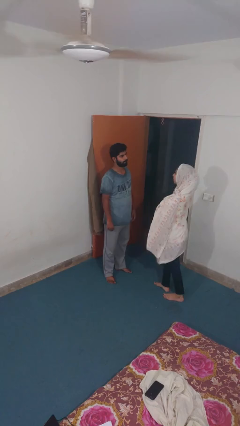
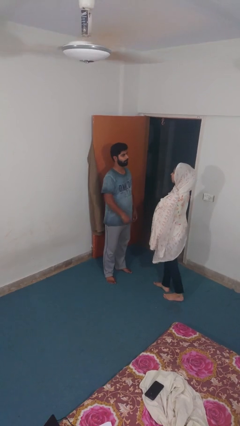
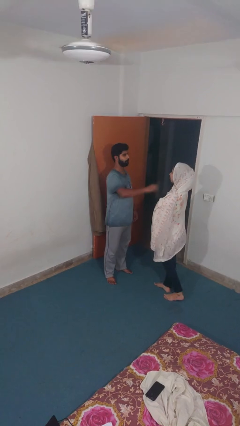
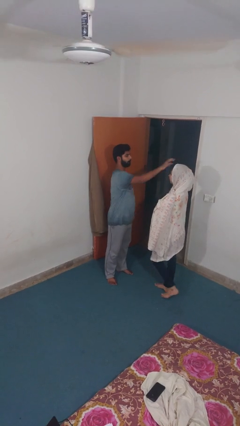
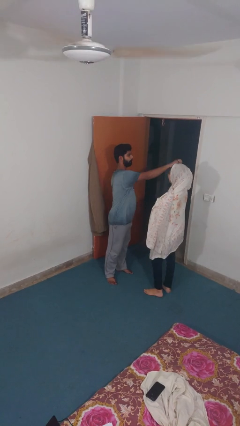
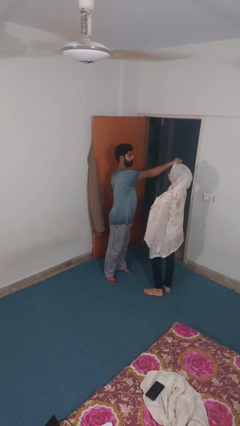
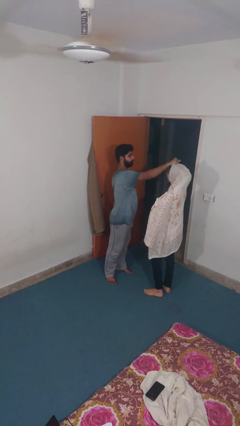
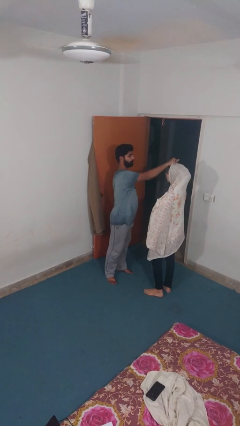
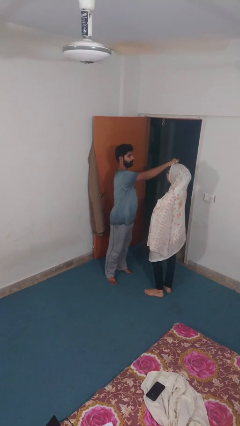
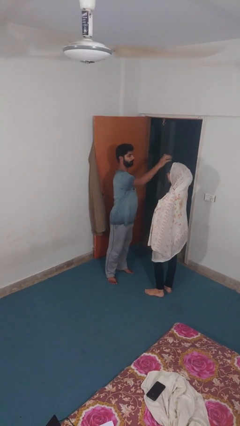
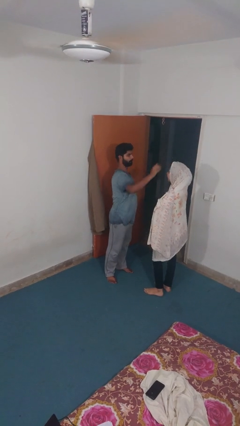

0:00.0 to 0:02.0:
person grabs person by hair

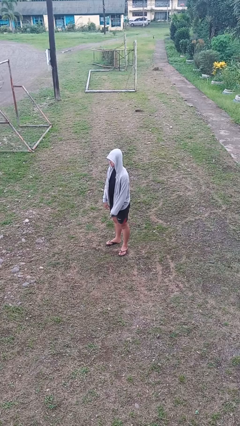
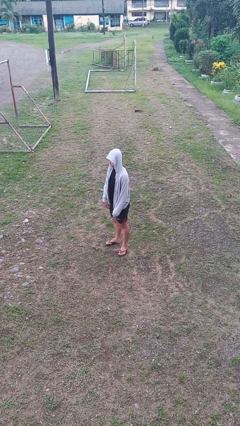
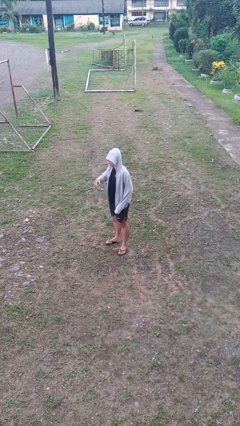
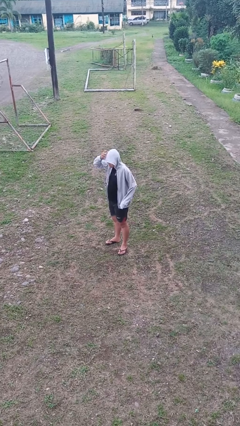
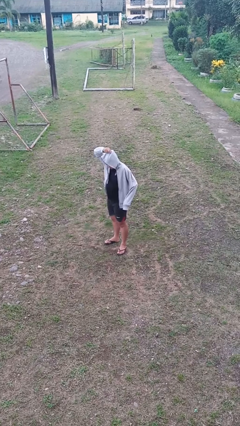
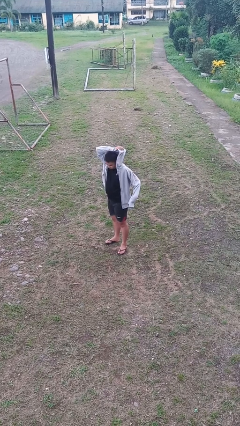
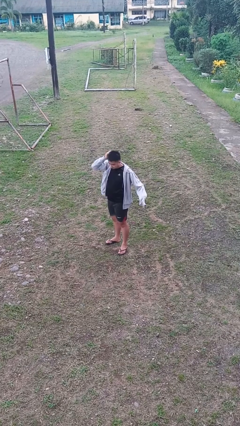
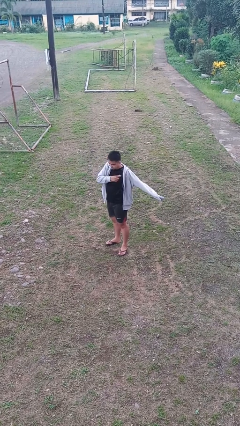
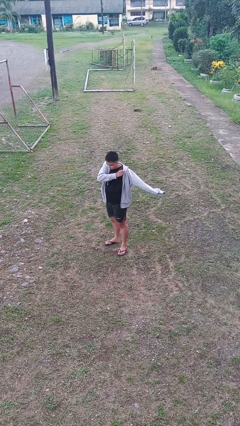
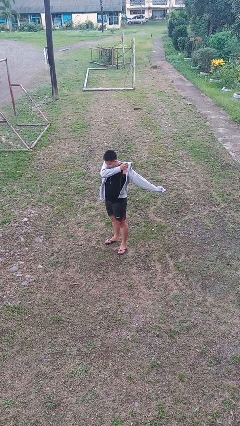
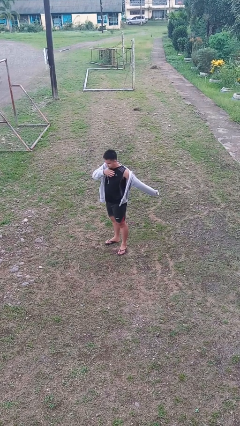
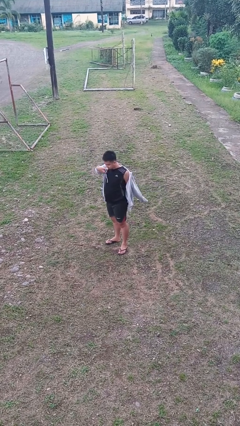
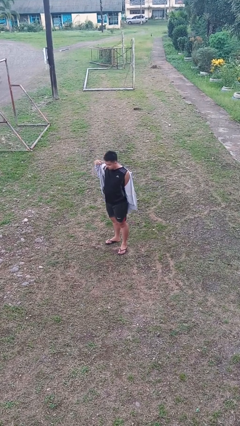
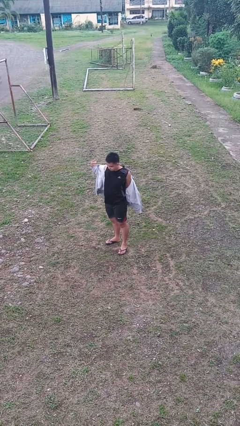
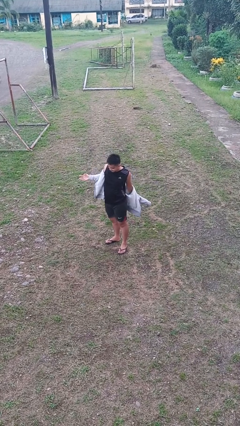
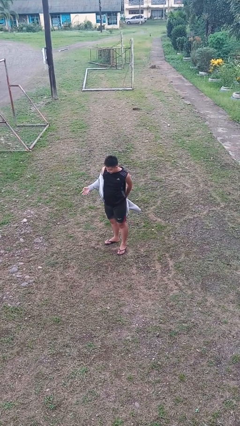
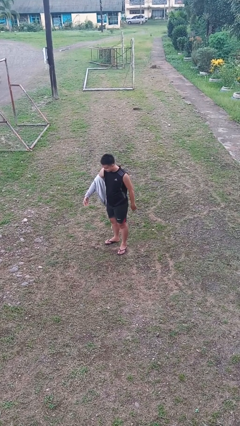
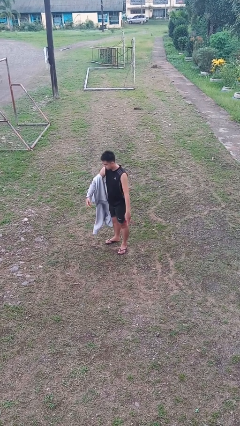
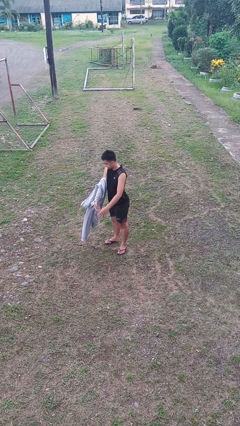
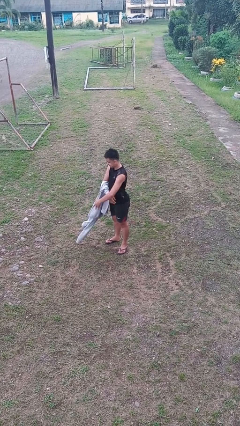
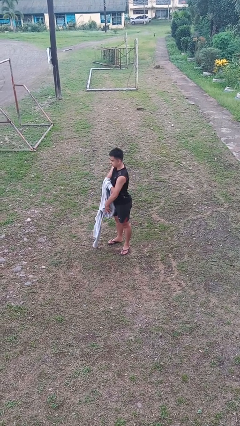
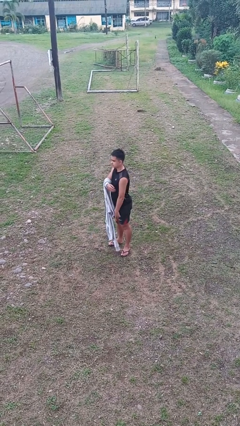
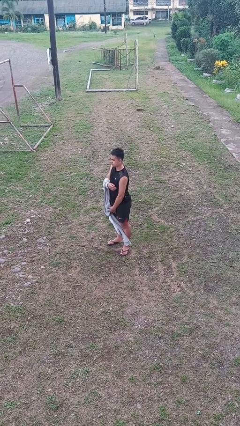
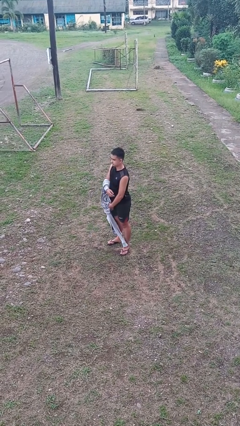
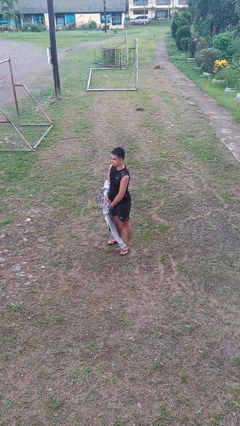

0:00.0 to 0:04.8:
person takes off hoodie

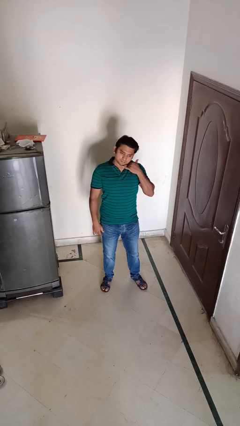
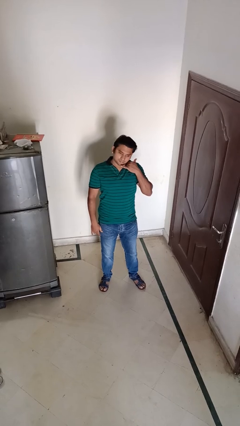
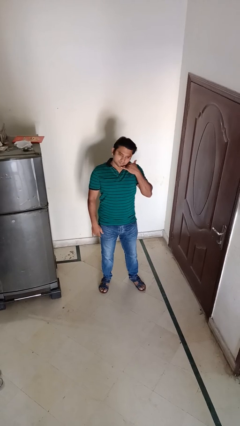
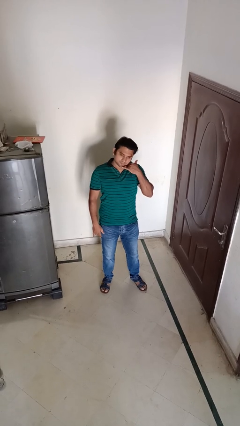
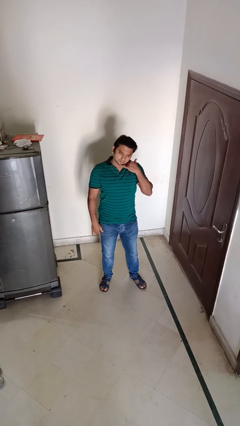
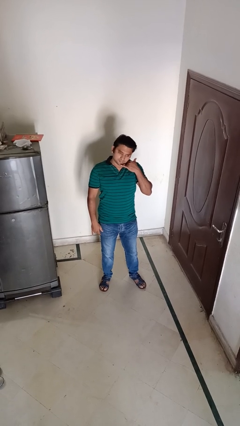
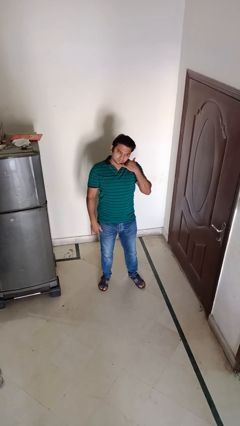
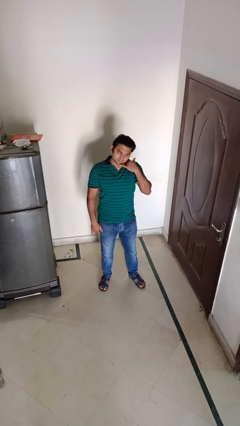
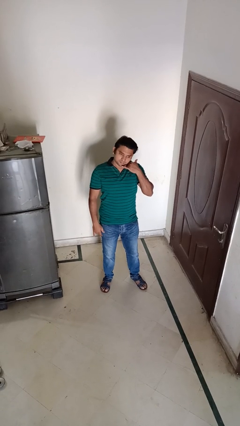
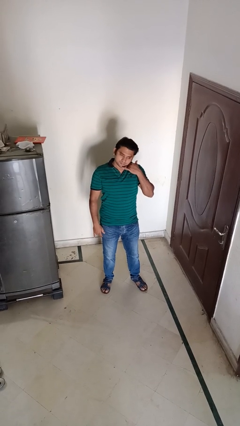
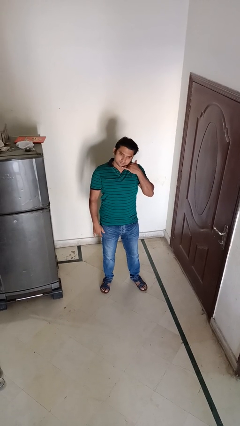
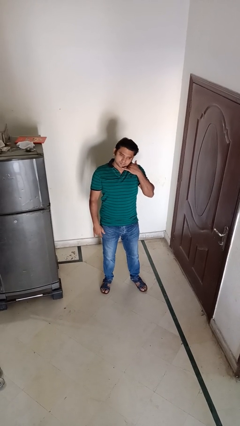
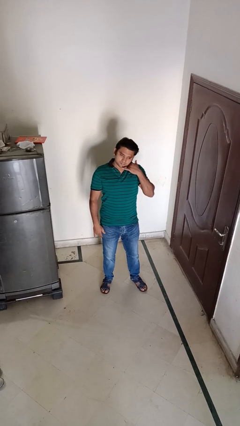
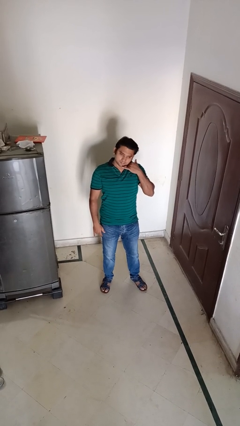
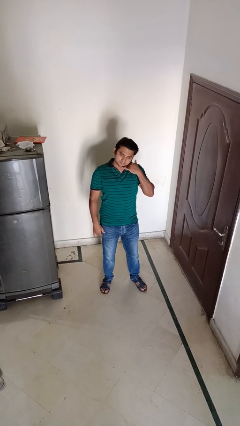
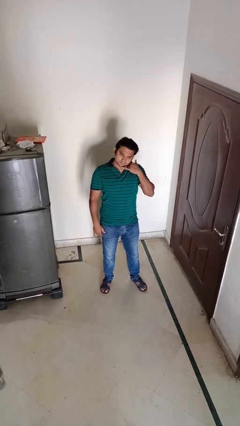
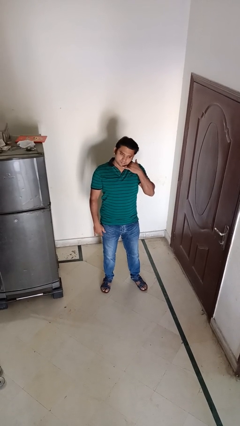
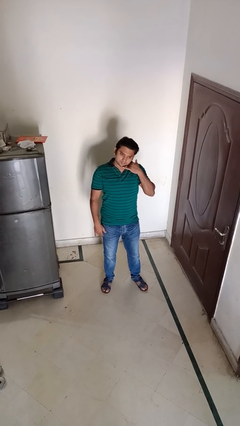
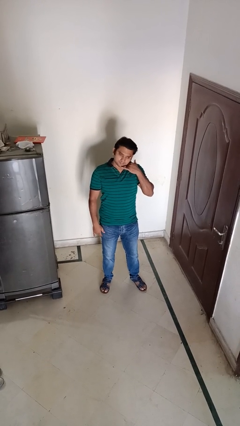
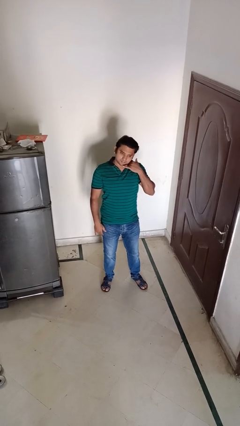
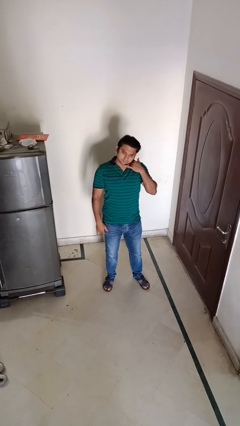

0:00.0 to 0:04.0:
person gestures call me

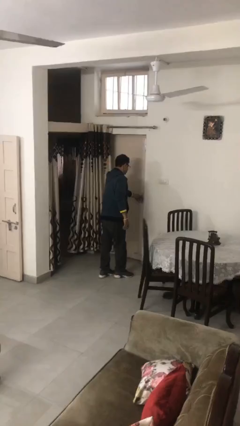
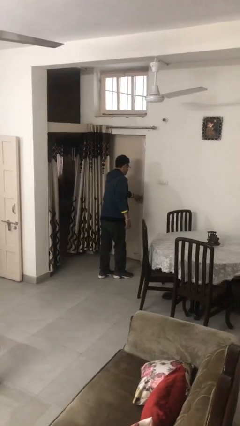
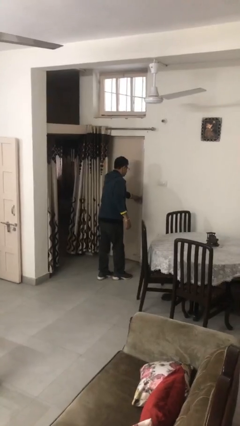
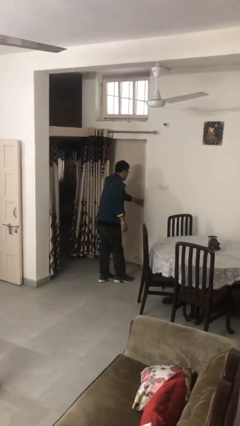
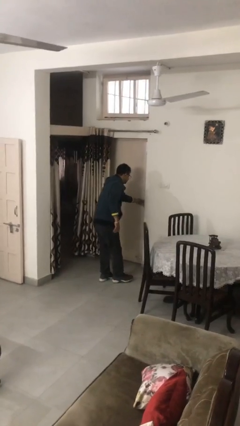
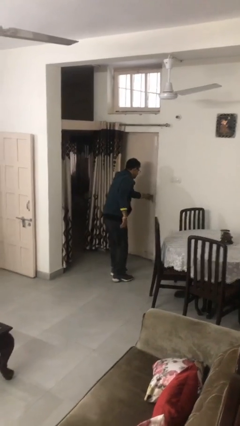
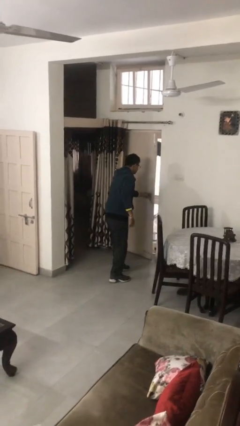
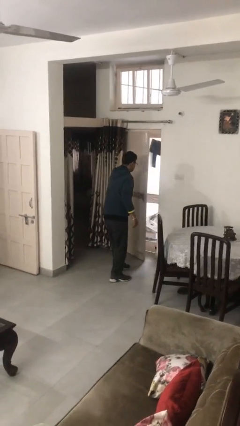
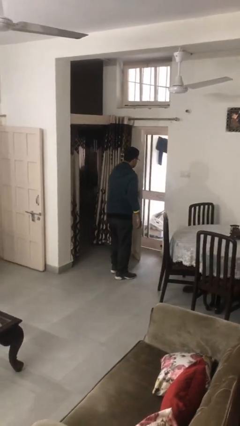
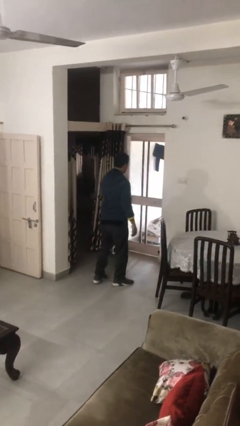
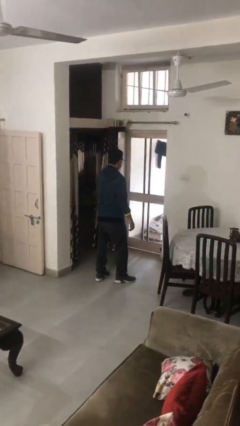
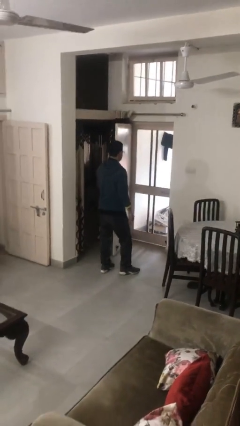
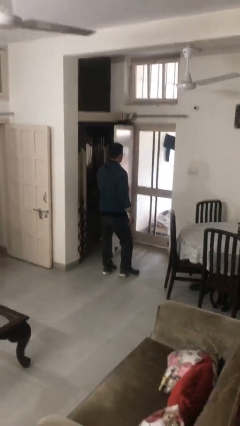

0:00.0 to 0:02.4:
person opens facility door

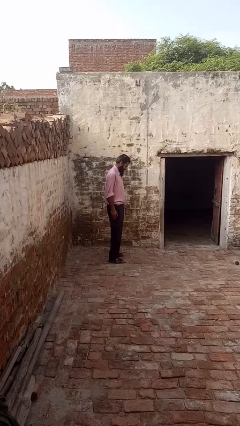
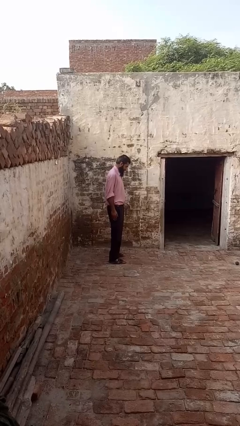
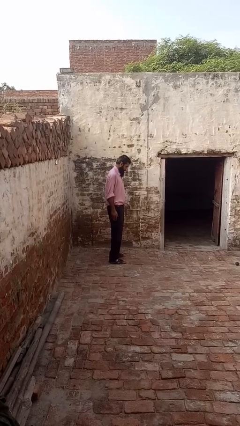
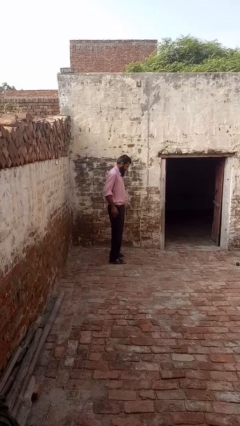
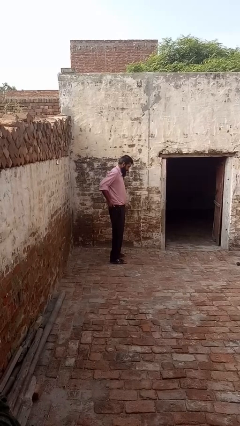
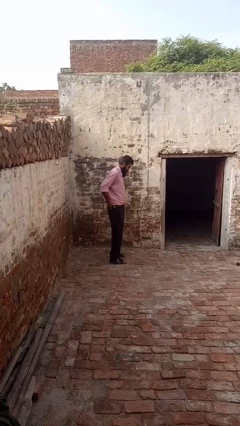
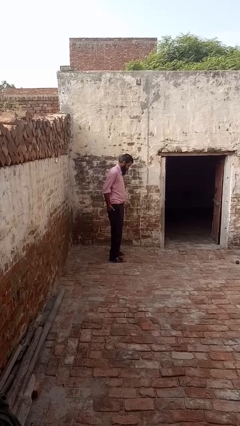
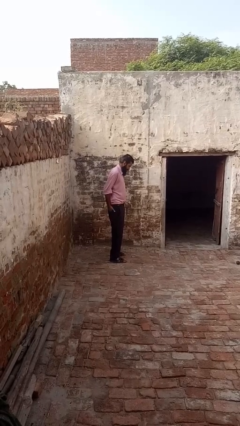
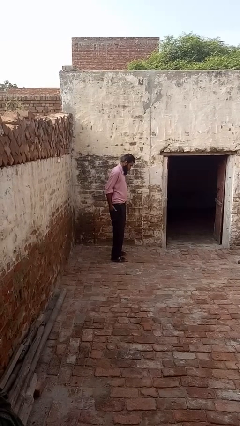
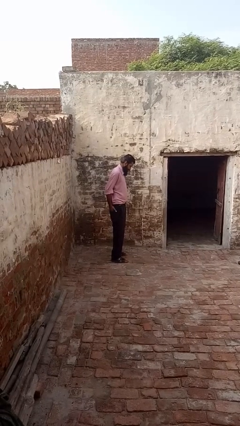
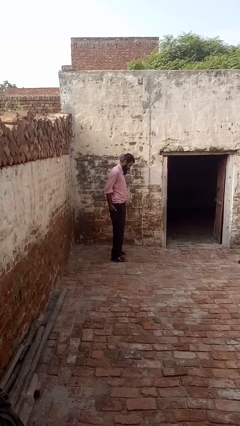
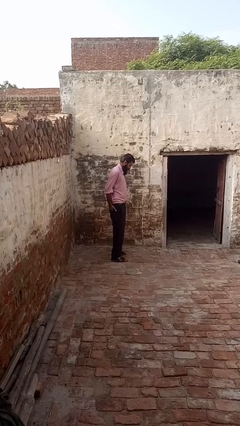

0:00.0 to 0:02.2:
person puts hands in back pockets

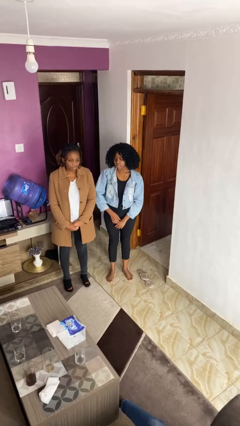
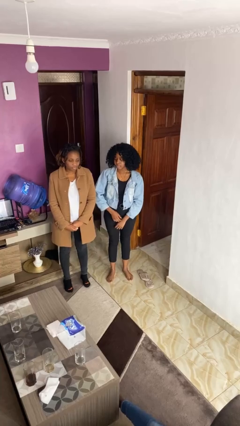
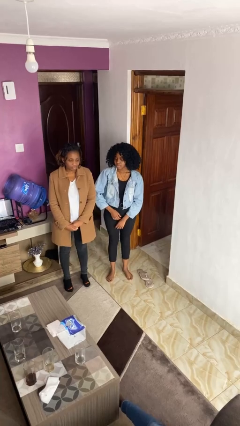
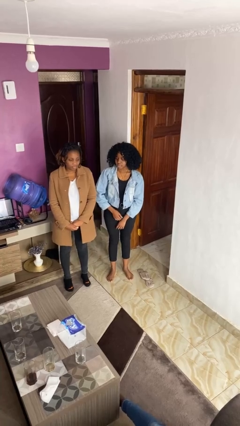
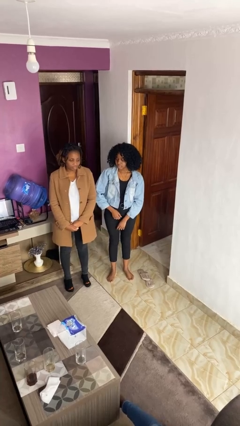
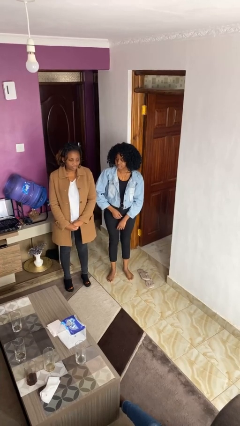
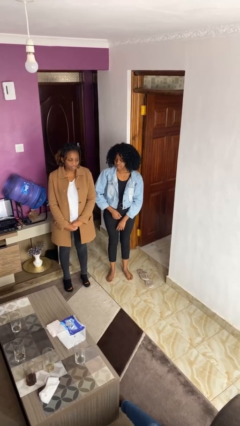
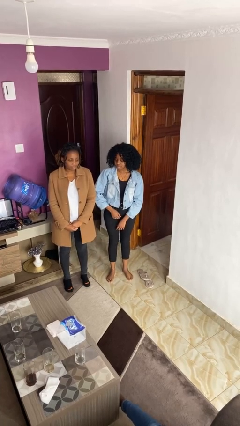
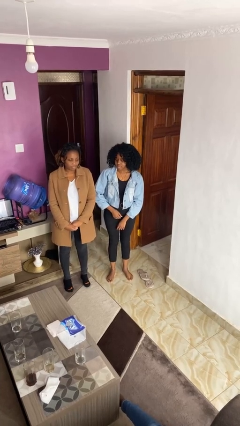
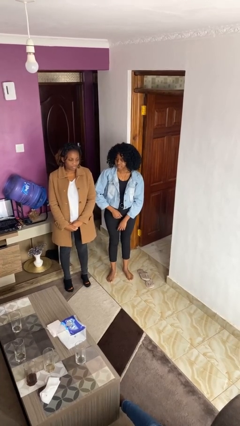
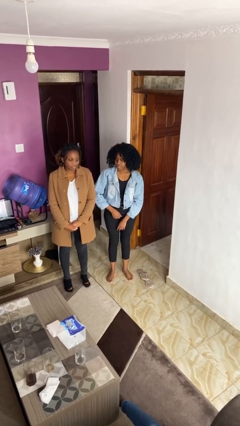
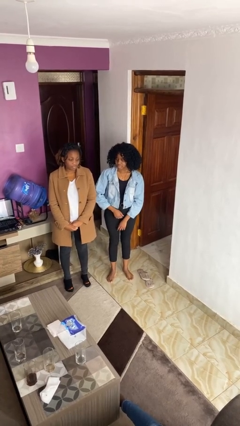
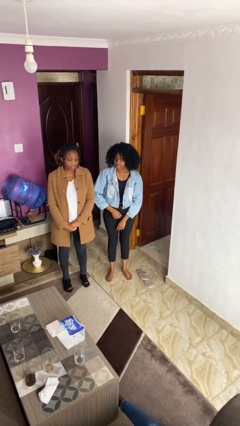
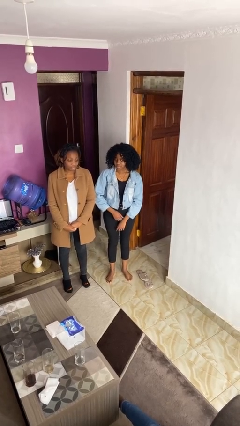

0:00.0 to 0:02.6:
person nudges person with elbow
